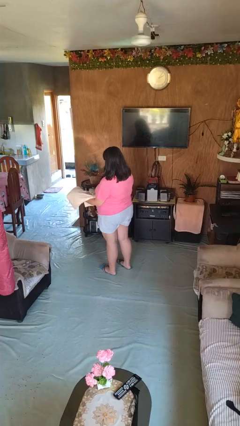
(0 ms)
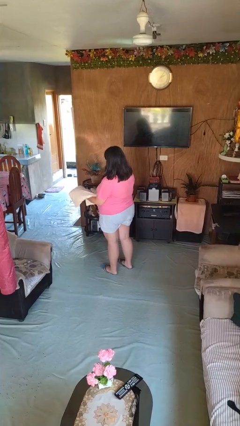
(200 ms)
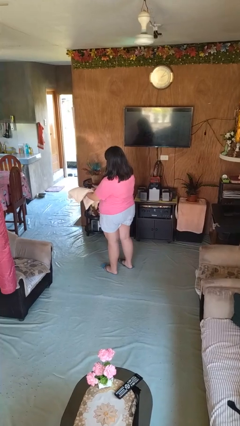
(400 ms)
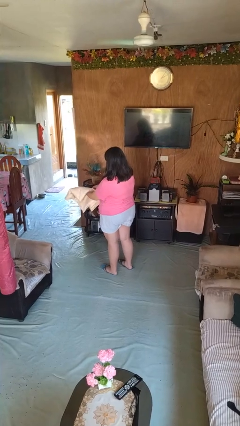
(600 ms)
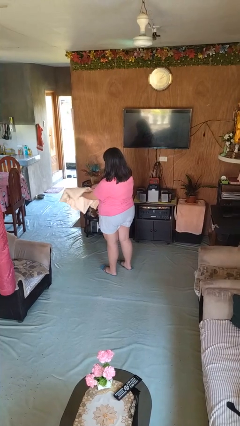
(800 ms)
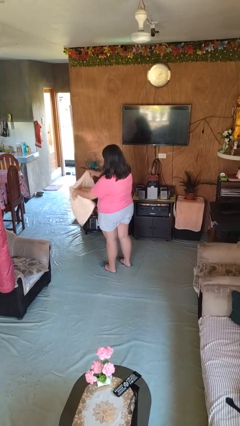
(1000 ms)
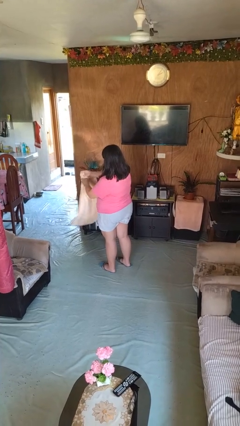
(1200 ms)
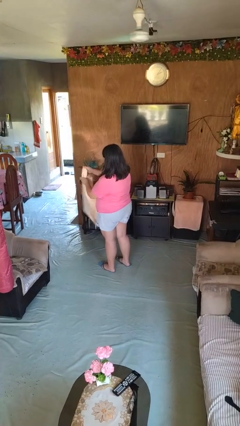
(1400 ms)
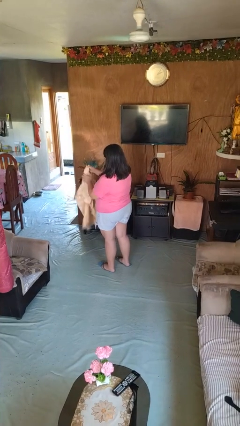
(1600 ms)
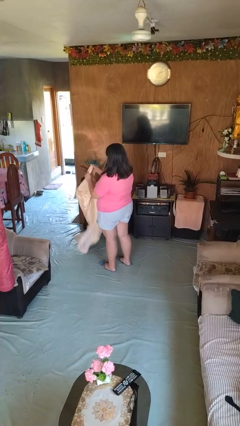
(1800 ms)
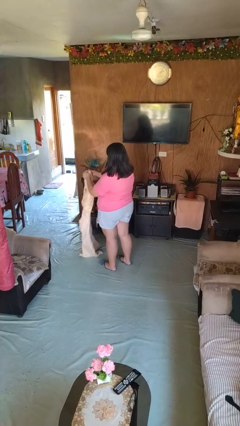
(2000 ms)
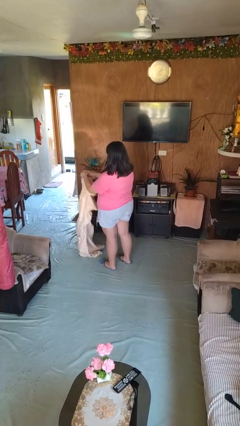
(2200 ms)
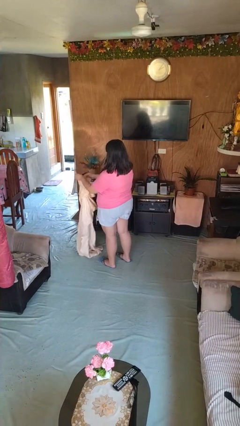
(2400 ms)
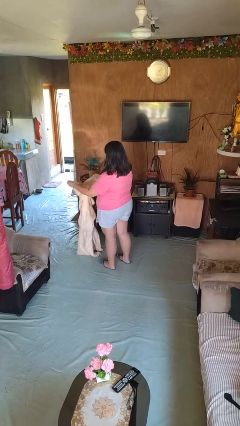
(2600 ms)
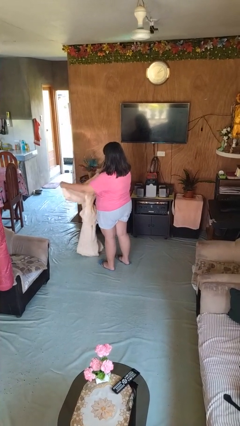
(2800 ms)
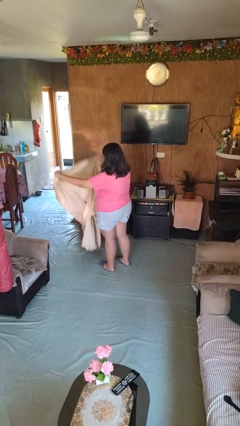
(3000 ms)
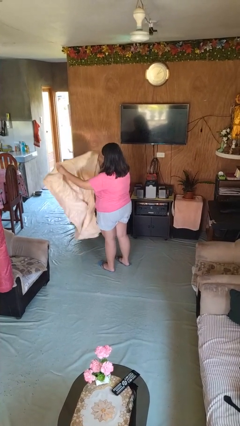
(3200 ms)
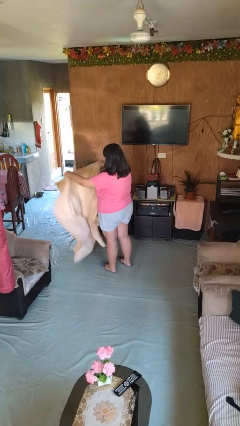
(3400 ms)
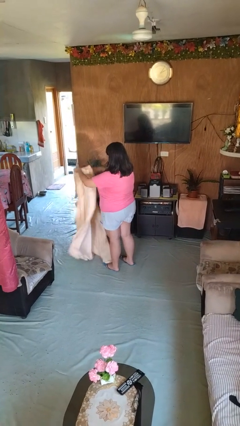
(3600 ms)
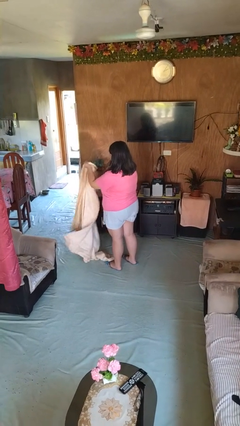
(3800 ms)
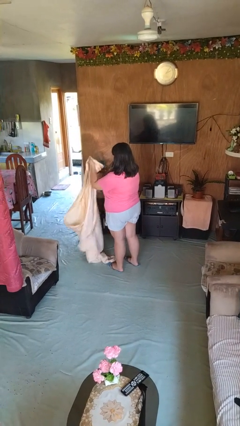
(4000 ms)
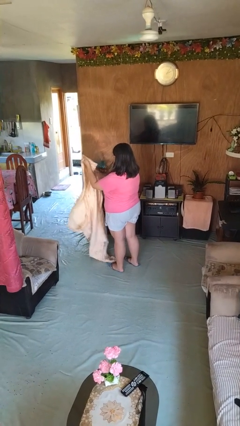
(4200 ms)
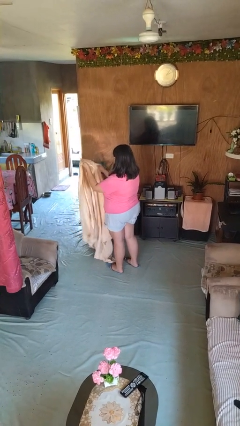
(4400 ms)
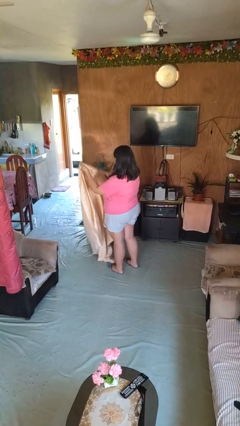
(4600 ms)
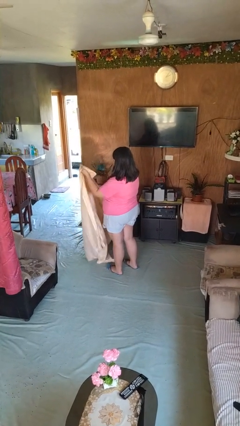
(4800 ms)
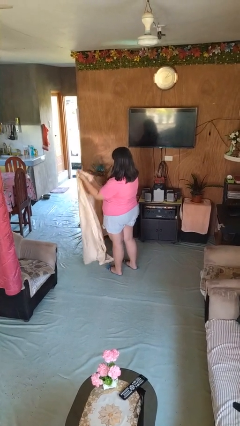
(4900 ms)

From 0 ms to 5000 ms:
person unfolds blanket

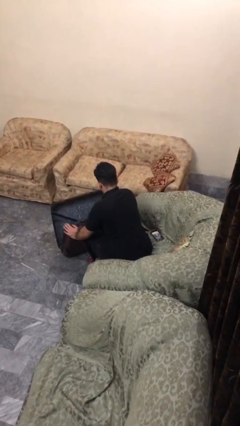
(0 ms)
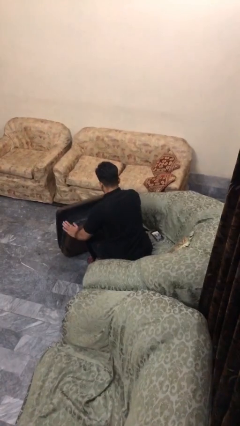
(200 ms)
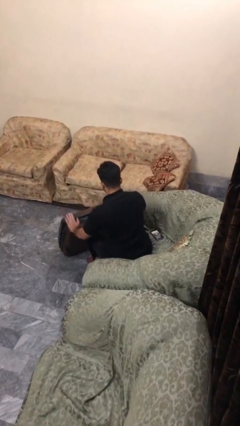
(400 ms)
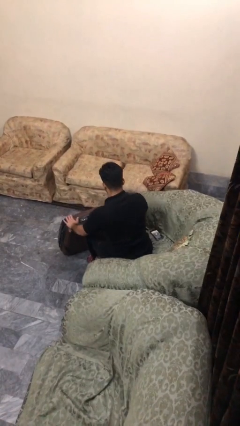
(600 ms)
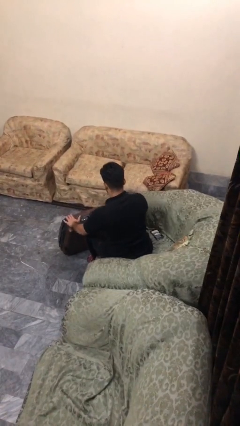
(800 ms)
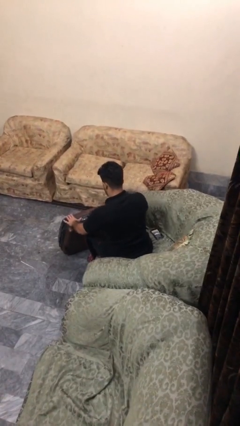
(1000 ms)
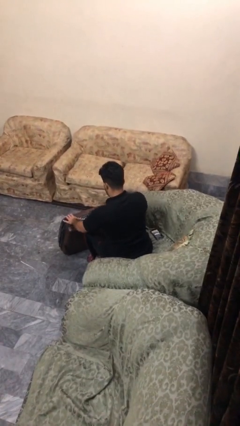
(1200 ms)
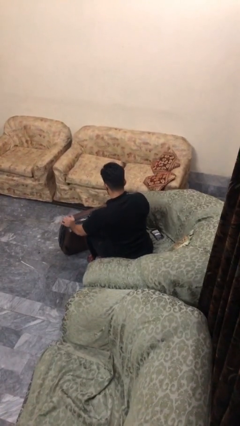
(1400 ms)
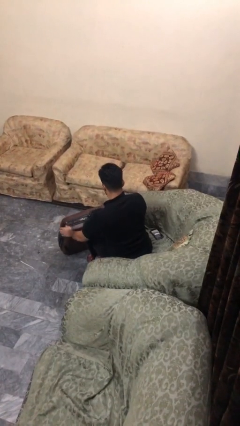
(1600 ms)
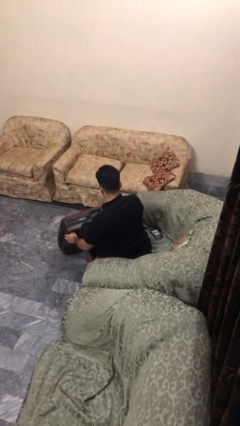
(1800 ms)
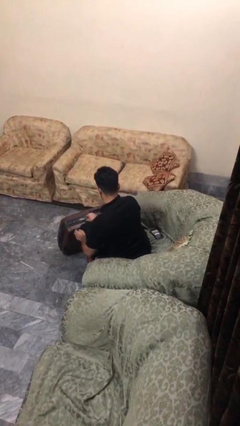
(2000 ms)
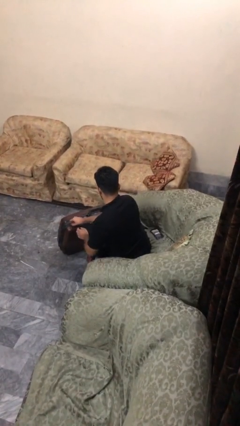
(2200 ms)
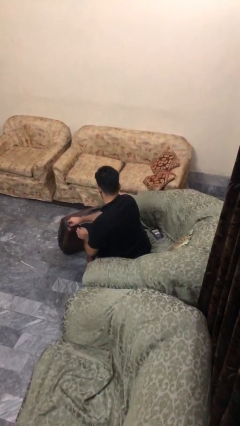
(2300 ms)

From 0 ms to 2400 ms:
person closes suitcase

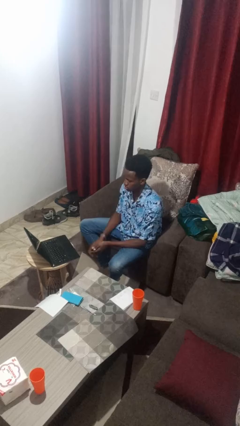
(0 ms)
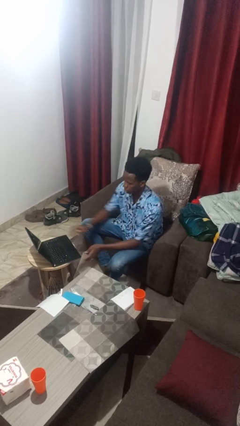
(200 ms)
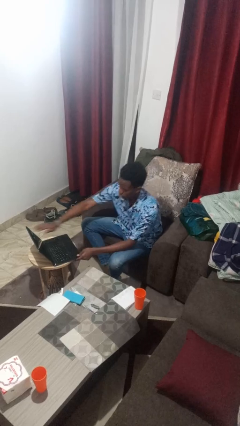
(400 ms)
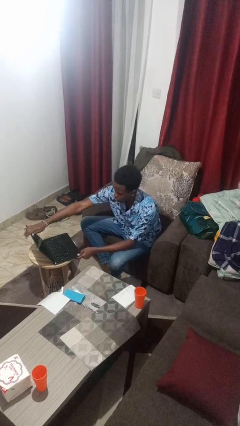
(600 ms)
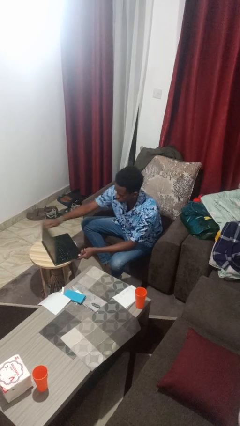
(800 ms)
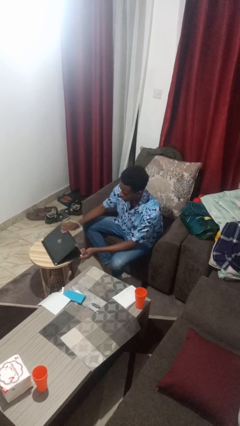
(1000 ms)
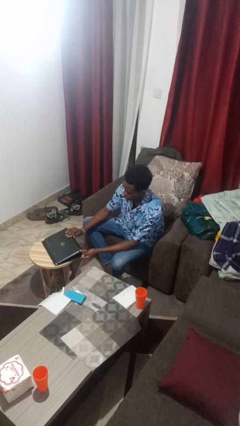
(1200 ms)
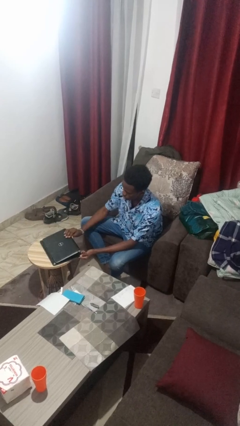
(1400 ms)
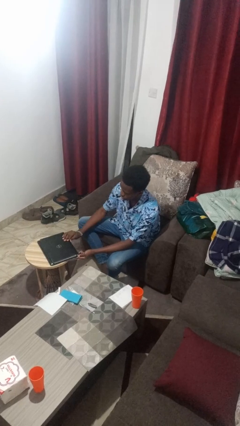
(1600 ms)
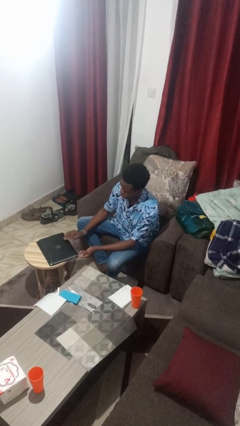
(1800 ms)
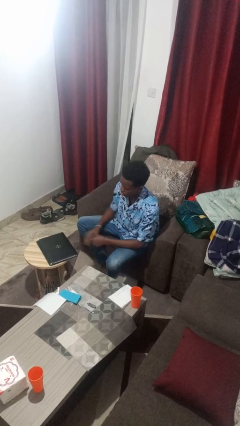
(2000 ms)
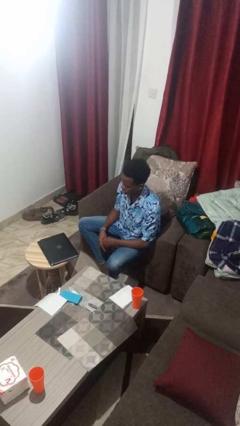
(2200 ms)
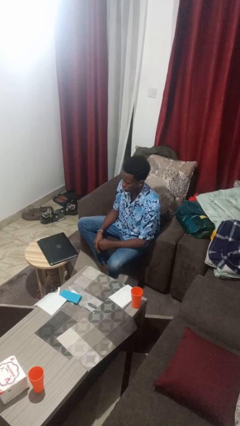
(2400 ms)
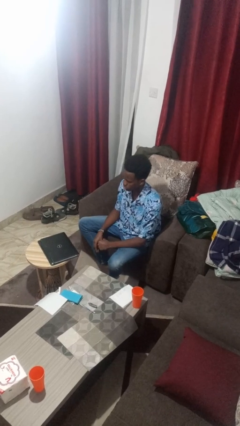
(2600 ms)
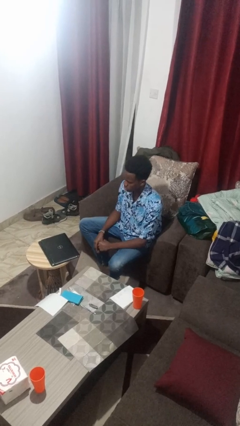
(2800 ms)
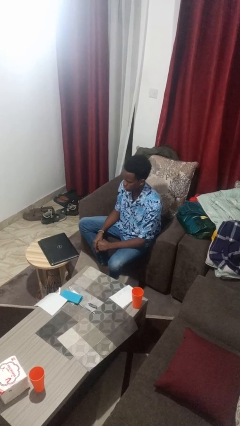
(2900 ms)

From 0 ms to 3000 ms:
person closes laptop

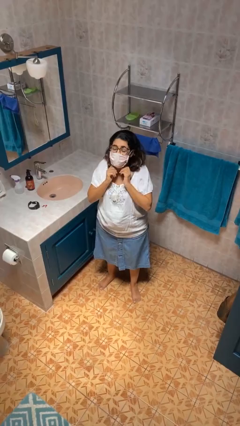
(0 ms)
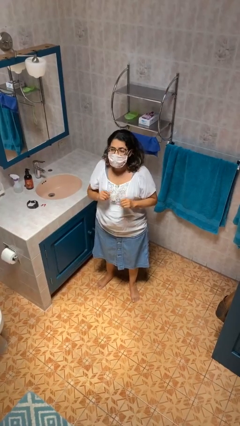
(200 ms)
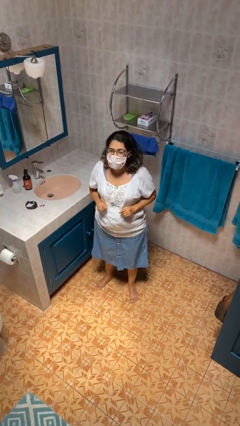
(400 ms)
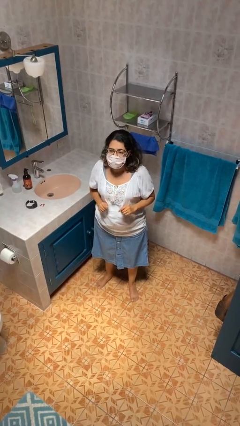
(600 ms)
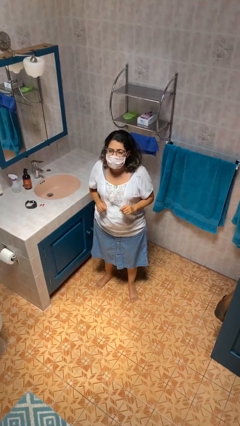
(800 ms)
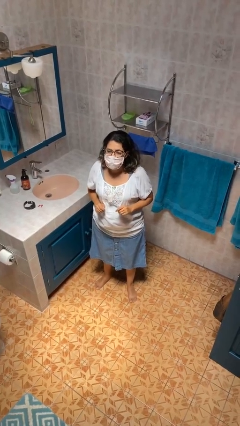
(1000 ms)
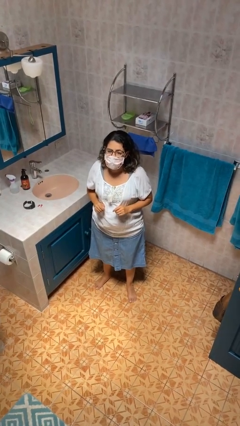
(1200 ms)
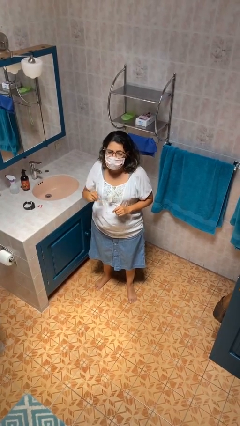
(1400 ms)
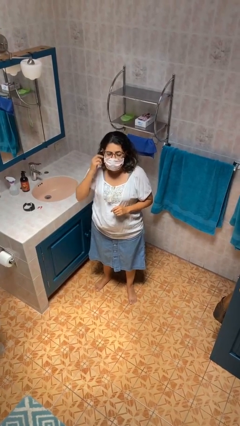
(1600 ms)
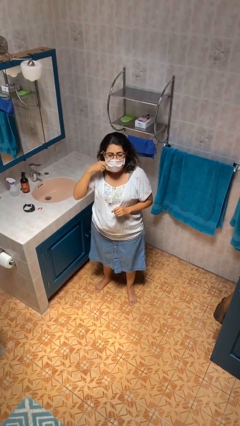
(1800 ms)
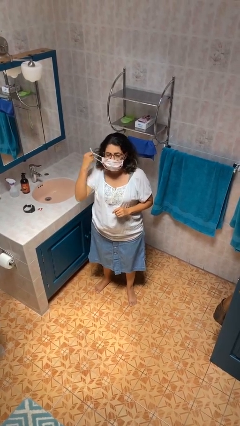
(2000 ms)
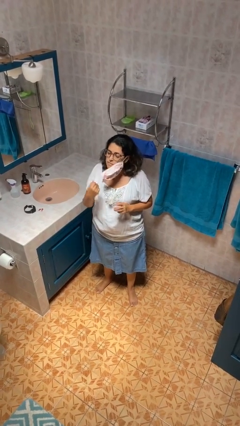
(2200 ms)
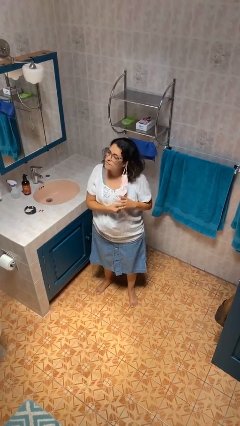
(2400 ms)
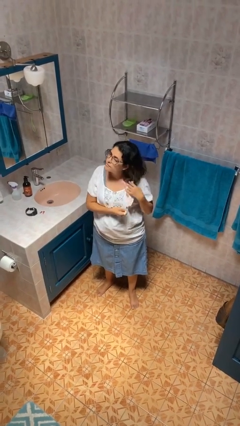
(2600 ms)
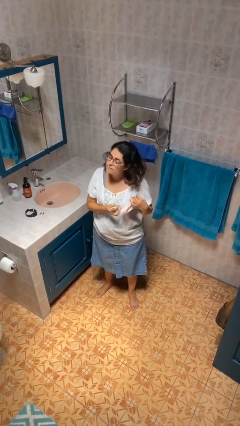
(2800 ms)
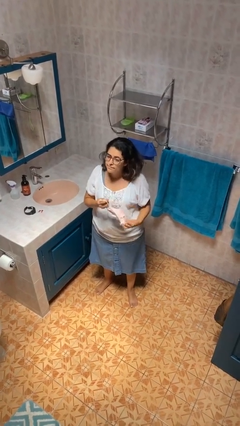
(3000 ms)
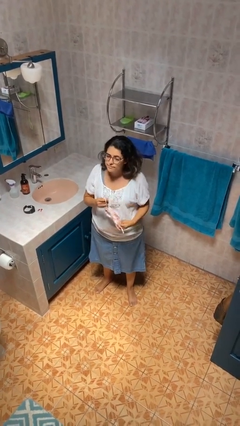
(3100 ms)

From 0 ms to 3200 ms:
person takes off facemask

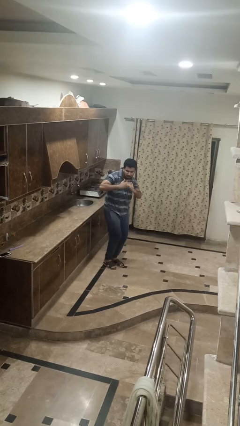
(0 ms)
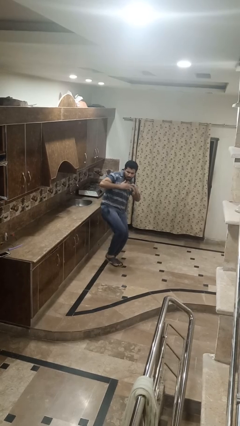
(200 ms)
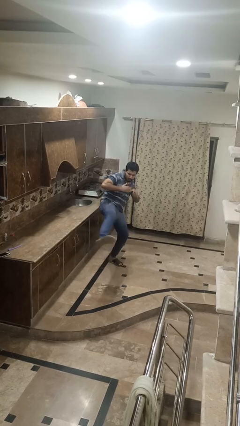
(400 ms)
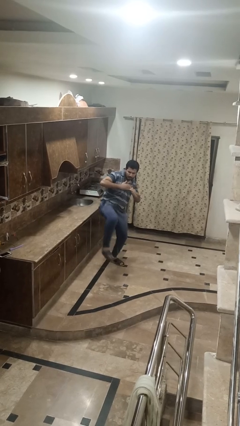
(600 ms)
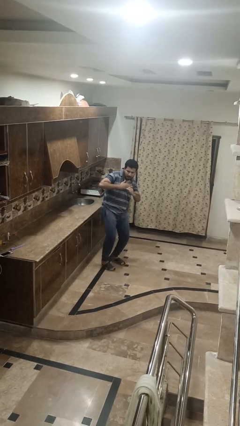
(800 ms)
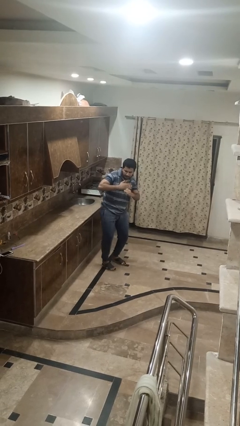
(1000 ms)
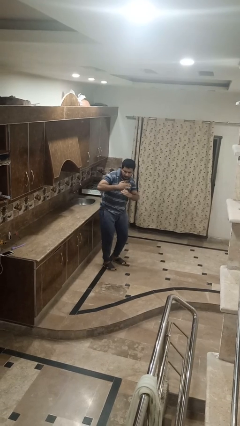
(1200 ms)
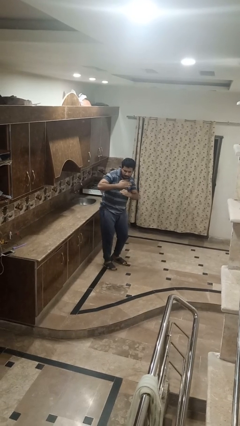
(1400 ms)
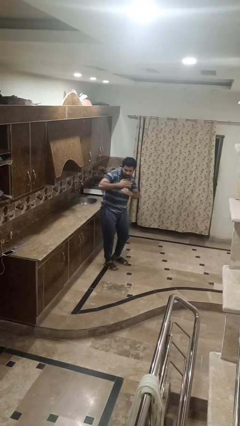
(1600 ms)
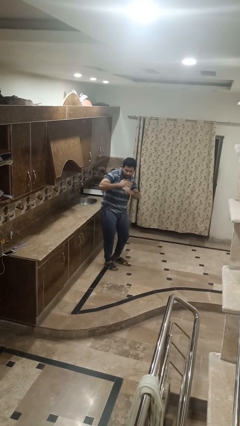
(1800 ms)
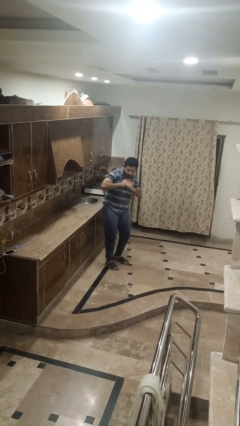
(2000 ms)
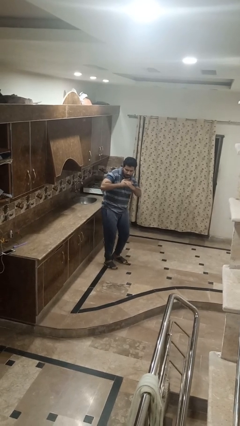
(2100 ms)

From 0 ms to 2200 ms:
person karate kicks

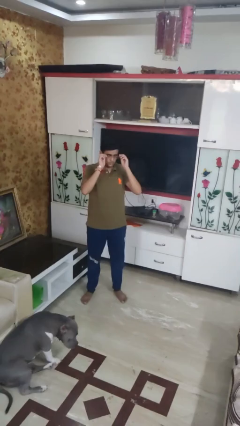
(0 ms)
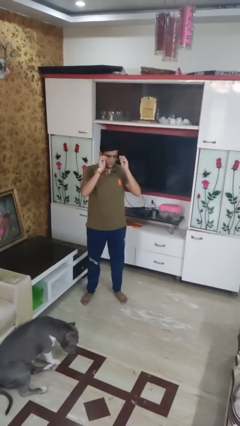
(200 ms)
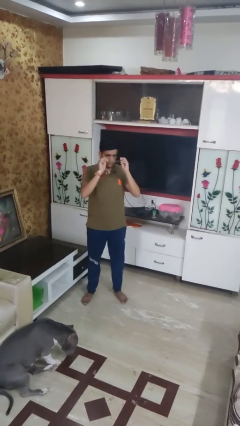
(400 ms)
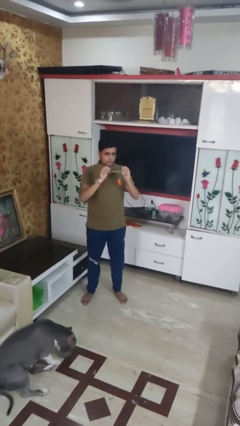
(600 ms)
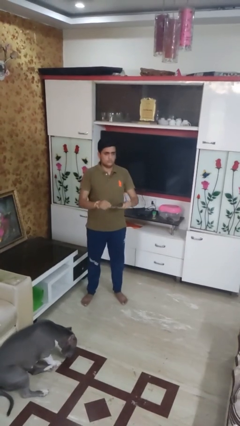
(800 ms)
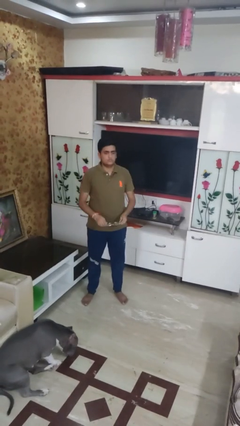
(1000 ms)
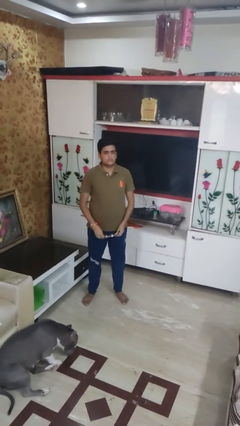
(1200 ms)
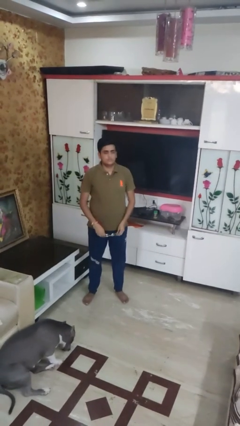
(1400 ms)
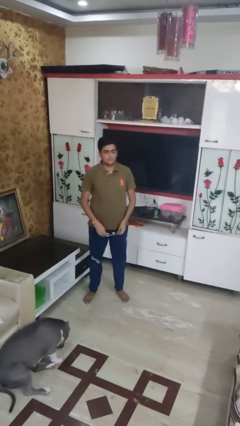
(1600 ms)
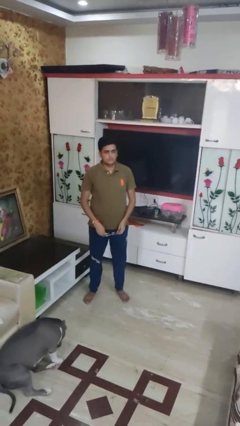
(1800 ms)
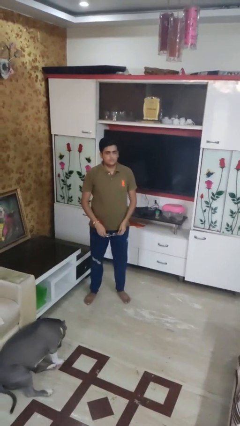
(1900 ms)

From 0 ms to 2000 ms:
person takes off glasses
